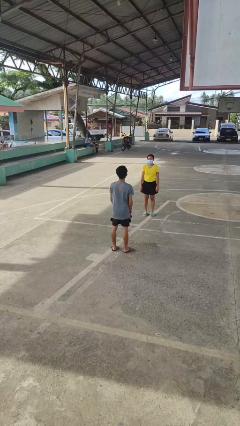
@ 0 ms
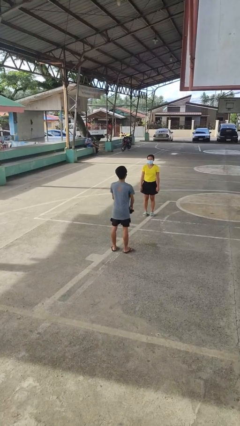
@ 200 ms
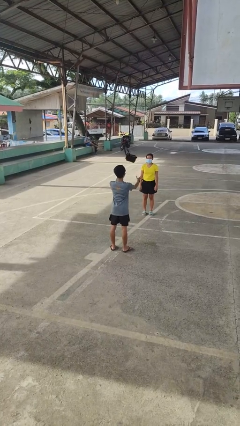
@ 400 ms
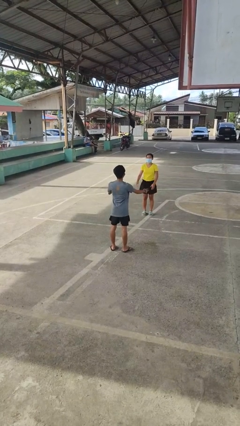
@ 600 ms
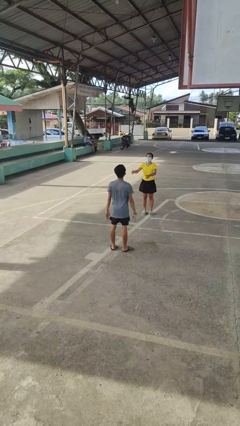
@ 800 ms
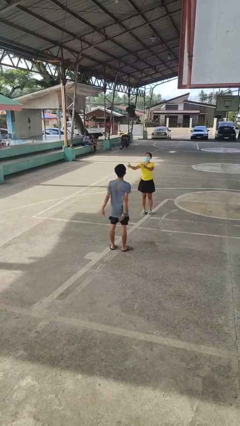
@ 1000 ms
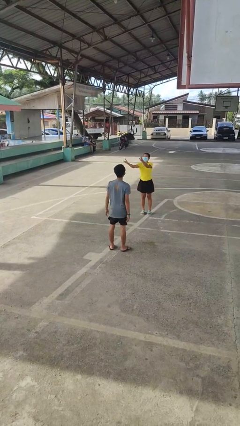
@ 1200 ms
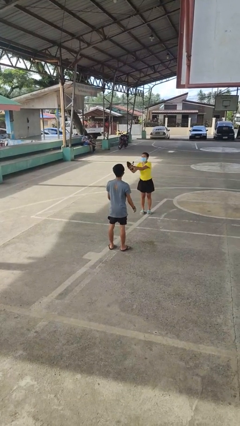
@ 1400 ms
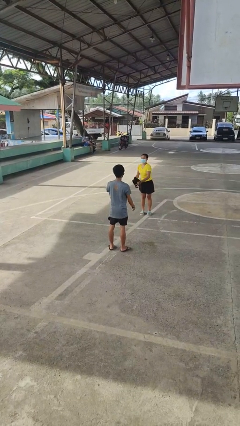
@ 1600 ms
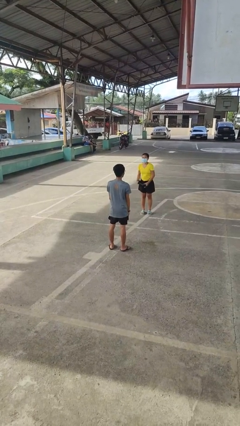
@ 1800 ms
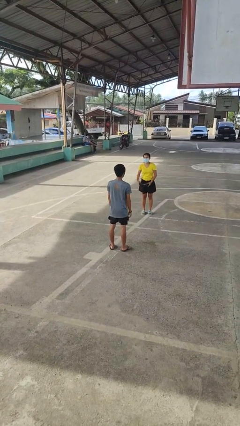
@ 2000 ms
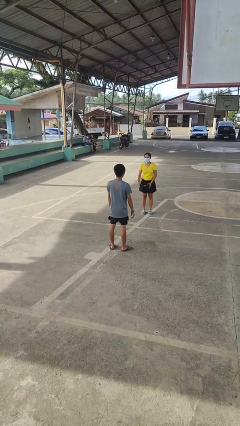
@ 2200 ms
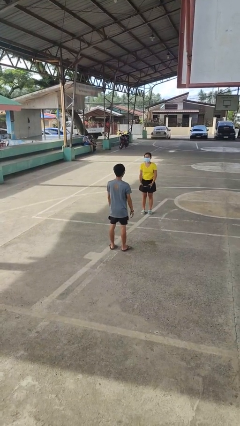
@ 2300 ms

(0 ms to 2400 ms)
person throws object to person

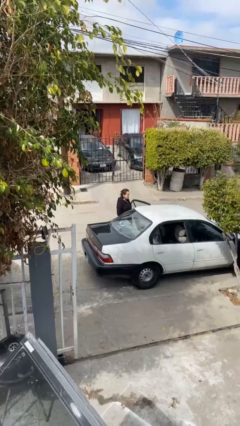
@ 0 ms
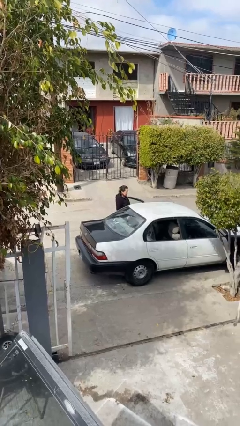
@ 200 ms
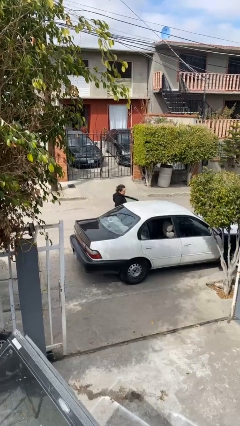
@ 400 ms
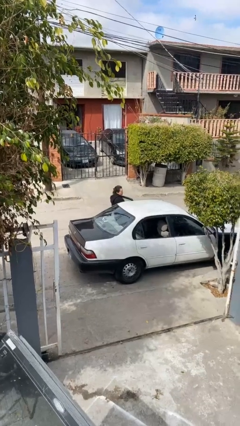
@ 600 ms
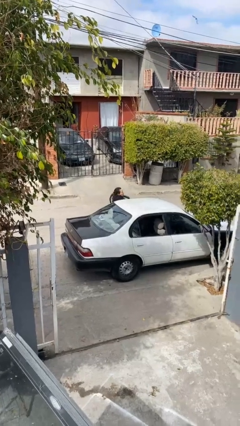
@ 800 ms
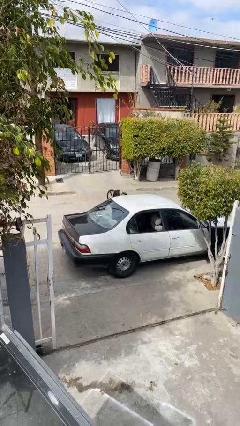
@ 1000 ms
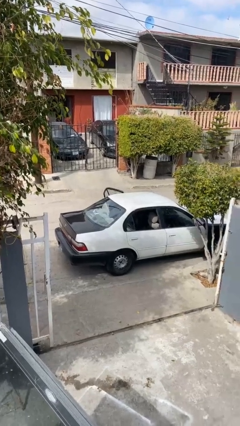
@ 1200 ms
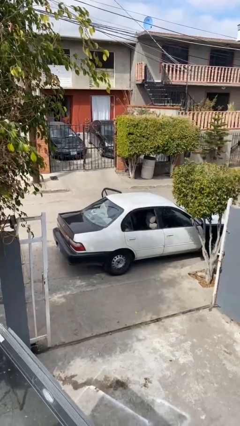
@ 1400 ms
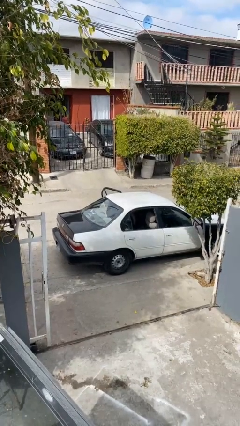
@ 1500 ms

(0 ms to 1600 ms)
person enters car

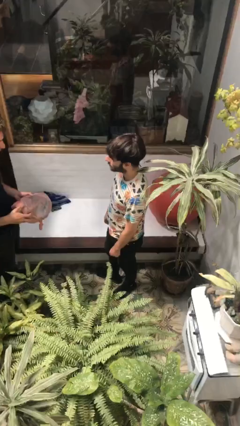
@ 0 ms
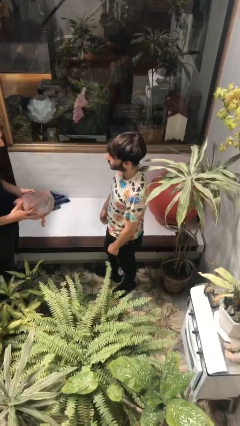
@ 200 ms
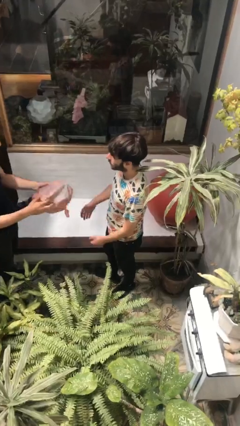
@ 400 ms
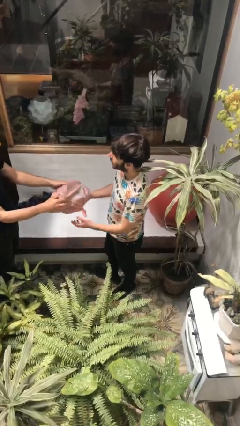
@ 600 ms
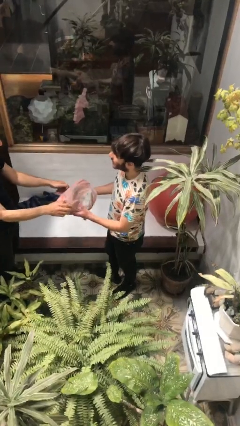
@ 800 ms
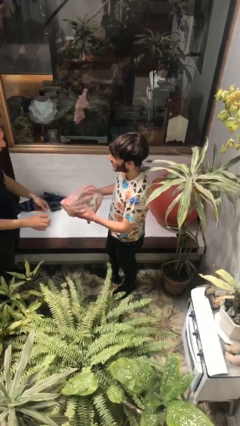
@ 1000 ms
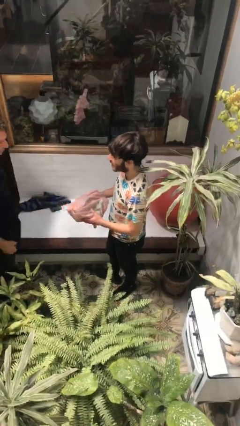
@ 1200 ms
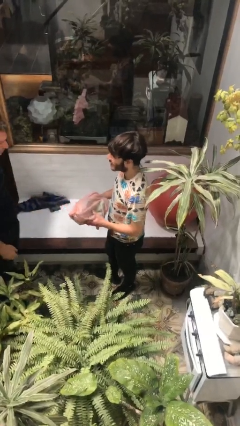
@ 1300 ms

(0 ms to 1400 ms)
person transfers object to person

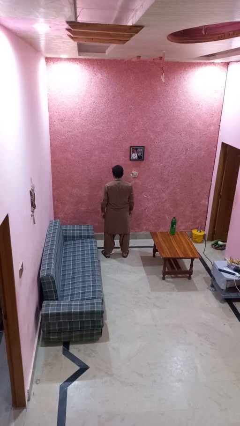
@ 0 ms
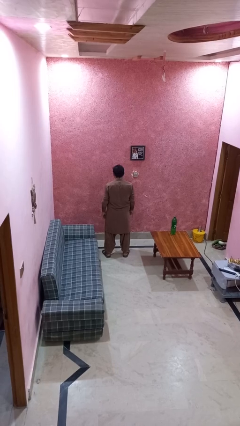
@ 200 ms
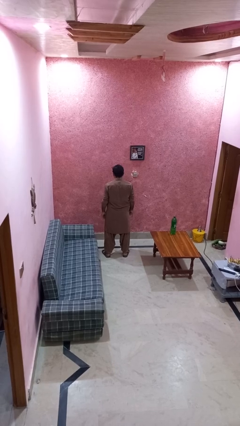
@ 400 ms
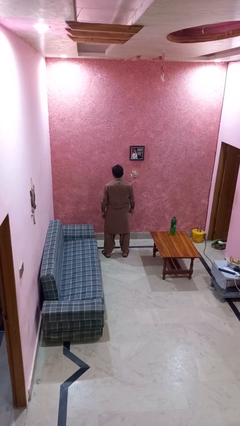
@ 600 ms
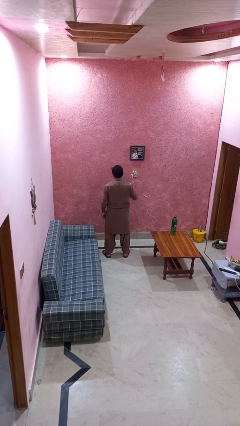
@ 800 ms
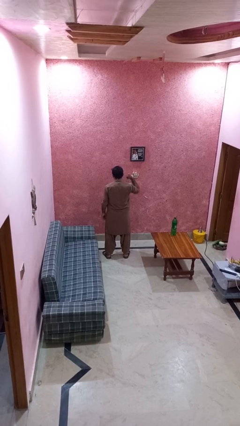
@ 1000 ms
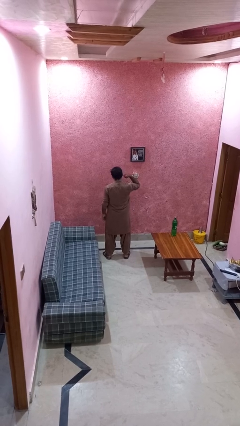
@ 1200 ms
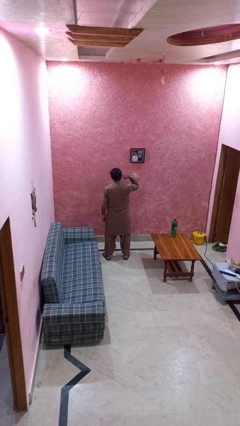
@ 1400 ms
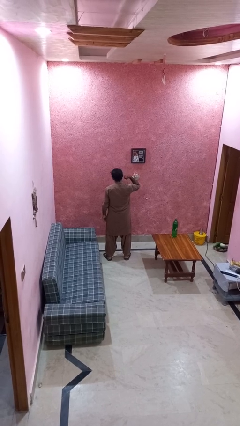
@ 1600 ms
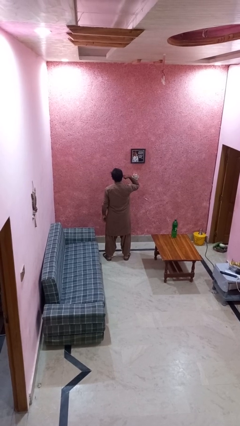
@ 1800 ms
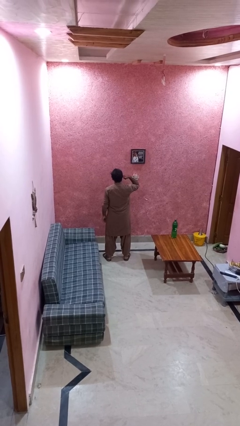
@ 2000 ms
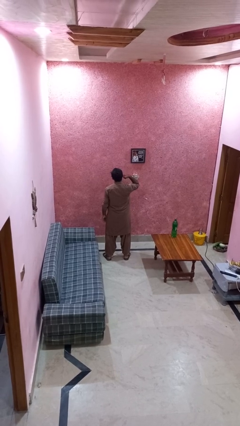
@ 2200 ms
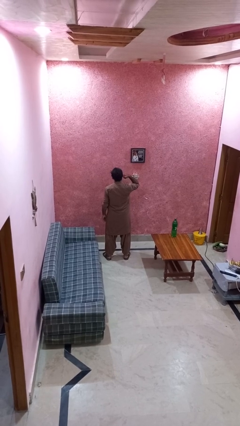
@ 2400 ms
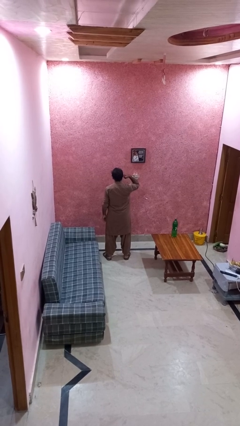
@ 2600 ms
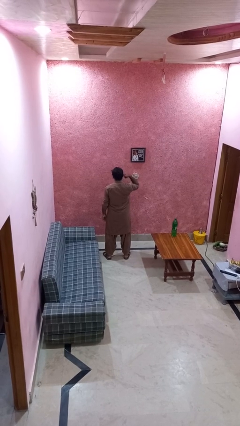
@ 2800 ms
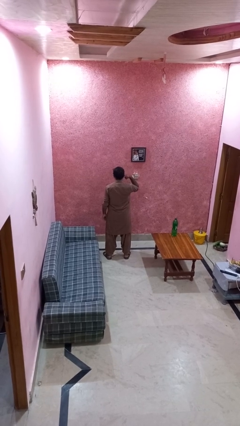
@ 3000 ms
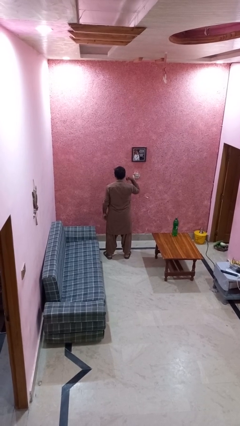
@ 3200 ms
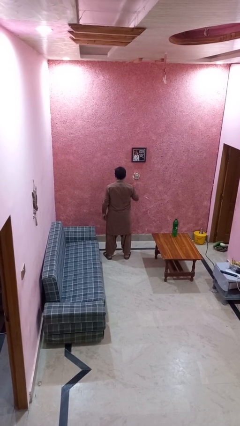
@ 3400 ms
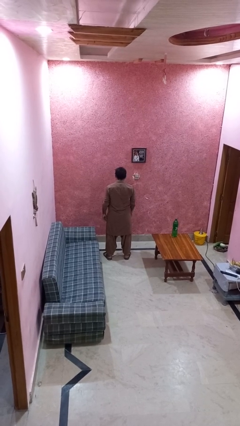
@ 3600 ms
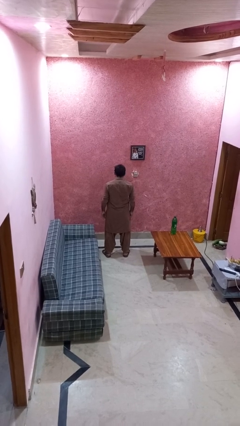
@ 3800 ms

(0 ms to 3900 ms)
person gestures call me

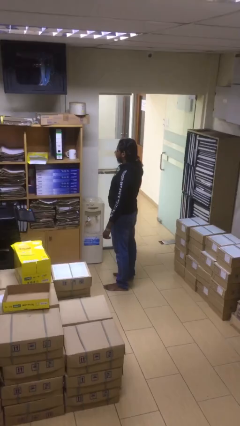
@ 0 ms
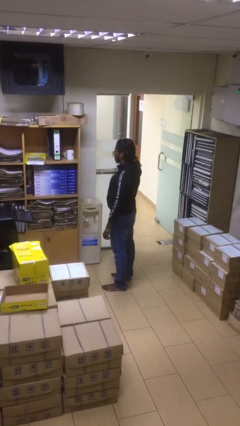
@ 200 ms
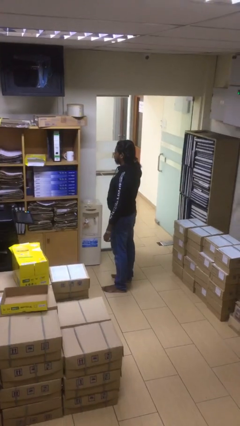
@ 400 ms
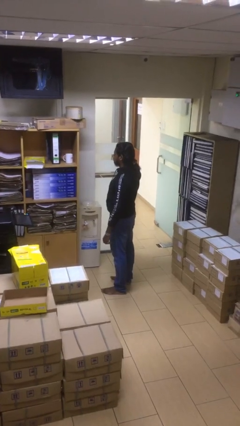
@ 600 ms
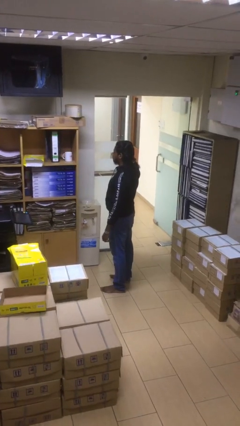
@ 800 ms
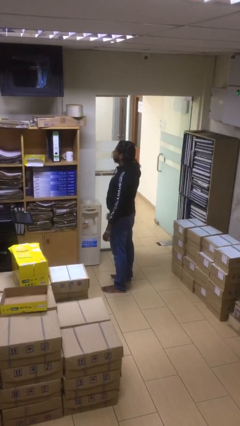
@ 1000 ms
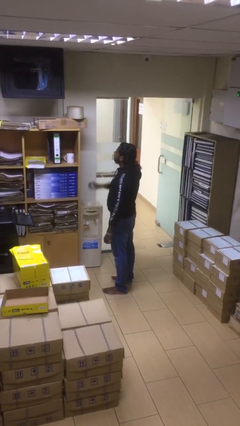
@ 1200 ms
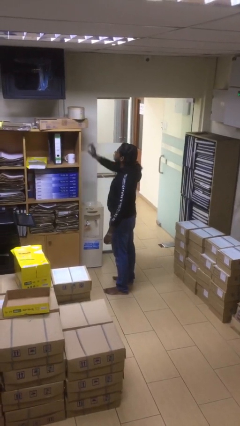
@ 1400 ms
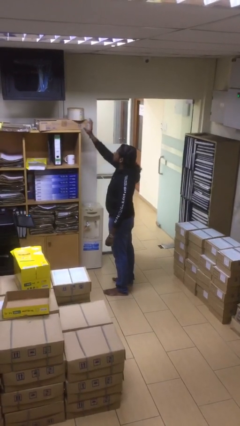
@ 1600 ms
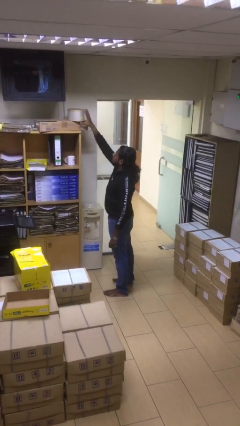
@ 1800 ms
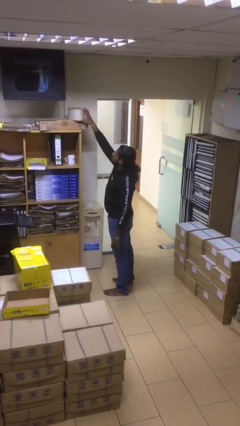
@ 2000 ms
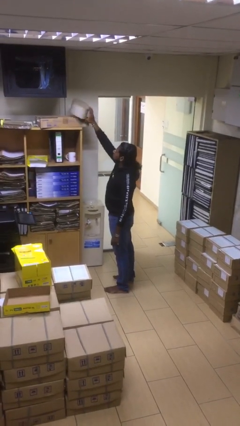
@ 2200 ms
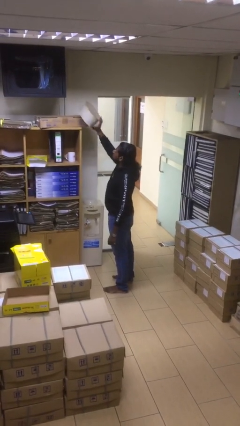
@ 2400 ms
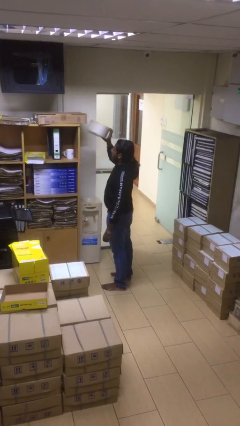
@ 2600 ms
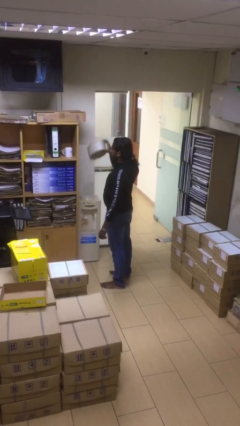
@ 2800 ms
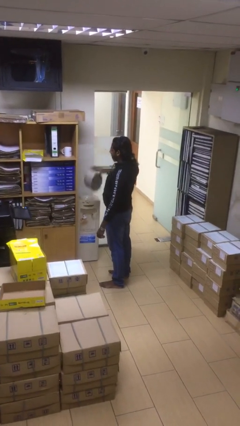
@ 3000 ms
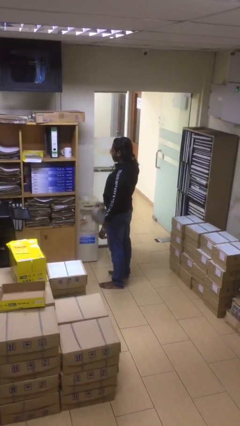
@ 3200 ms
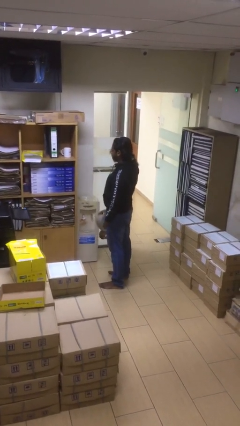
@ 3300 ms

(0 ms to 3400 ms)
person picks up object from shelf

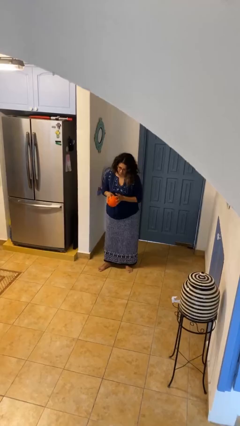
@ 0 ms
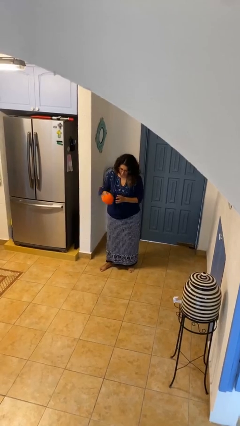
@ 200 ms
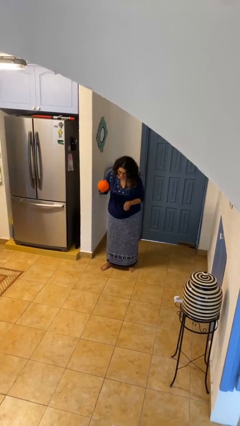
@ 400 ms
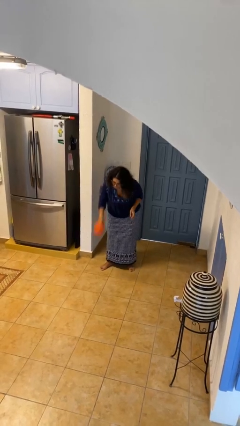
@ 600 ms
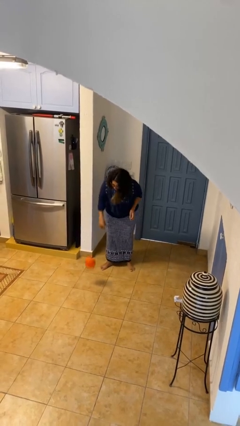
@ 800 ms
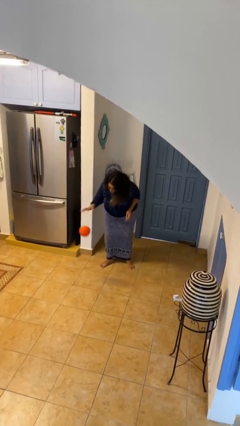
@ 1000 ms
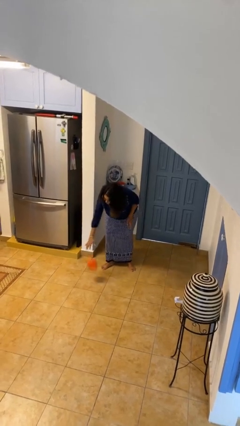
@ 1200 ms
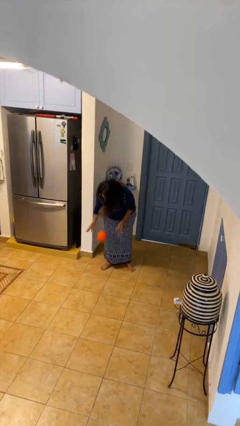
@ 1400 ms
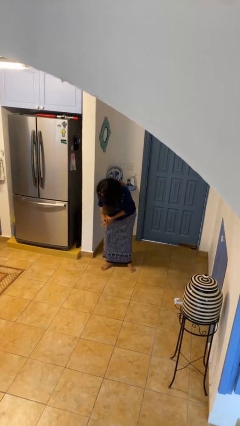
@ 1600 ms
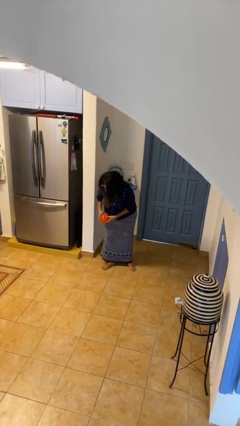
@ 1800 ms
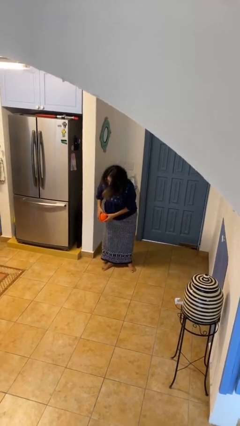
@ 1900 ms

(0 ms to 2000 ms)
person bounces ball on floor

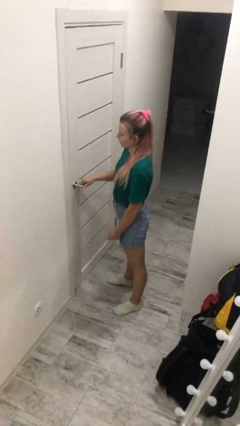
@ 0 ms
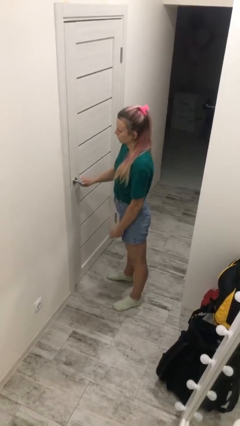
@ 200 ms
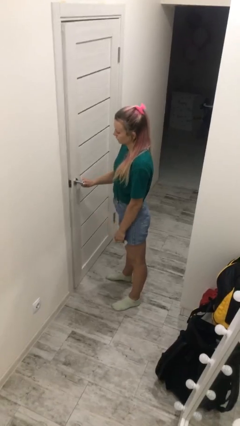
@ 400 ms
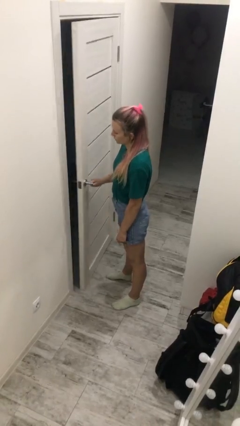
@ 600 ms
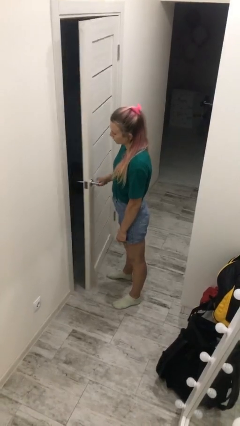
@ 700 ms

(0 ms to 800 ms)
person opens facility door

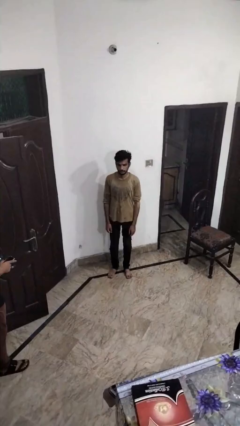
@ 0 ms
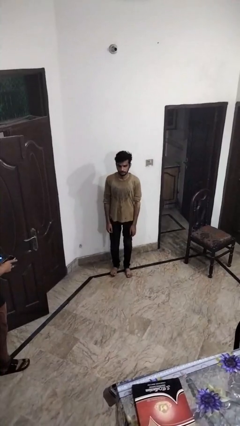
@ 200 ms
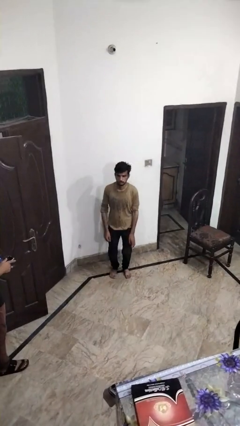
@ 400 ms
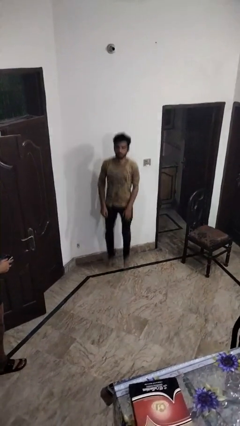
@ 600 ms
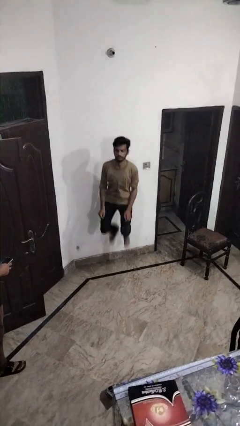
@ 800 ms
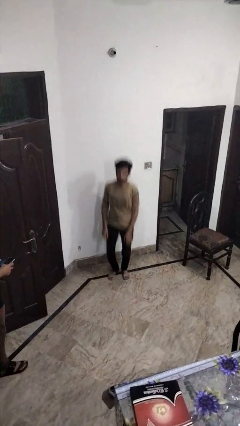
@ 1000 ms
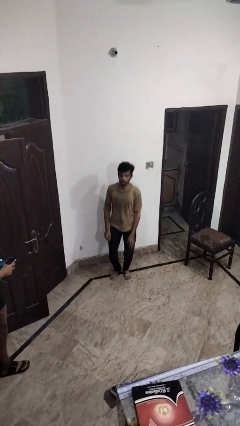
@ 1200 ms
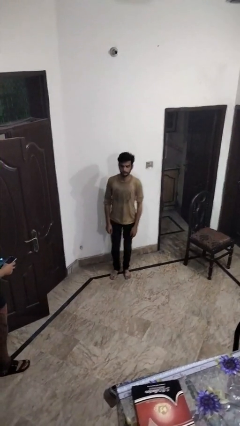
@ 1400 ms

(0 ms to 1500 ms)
person jumps
